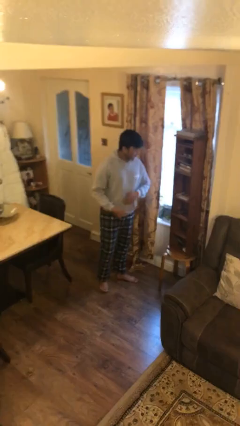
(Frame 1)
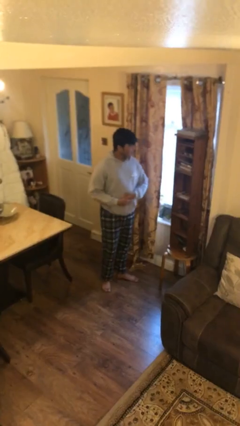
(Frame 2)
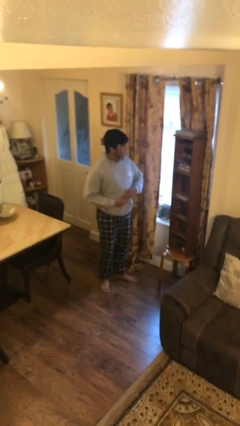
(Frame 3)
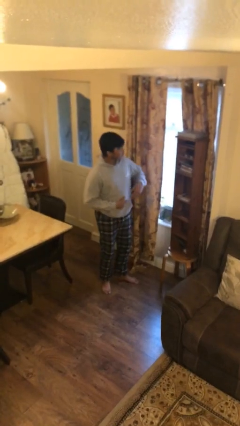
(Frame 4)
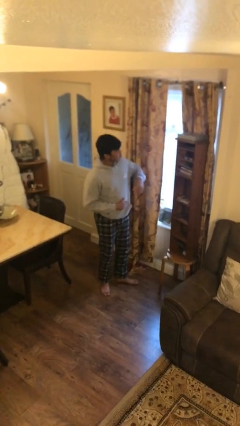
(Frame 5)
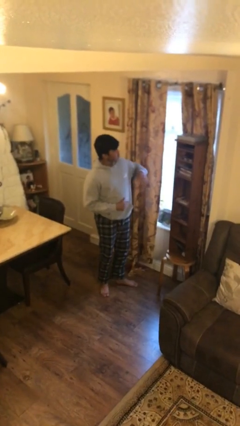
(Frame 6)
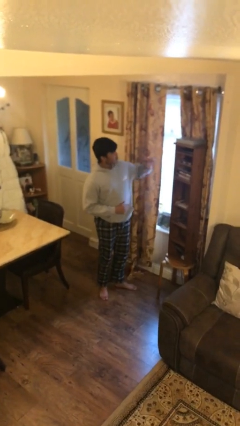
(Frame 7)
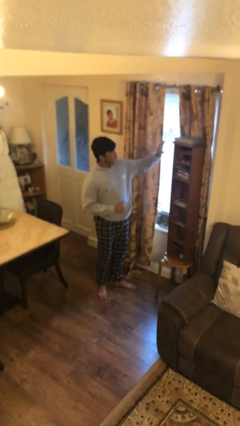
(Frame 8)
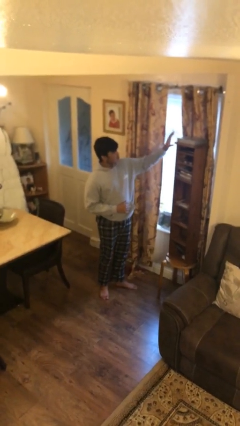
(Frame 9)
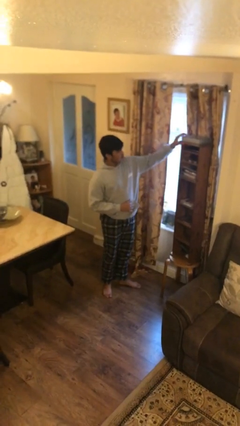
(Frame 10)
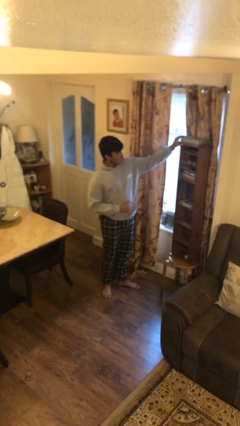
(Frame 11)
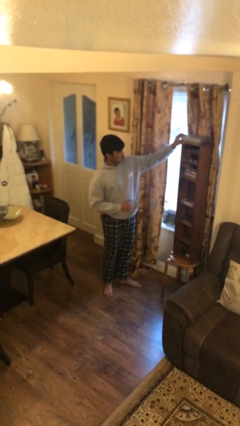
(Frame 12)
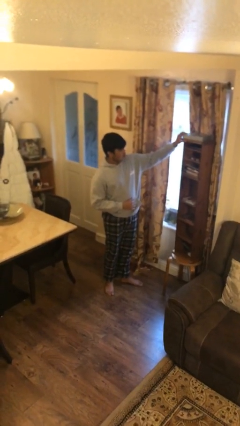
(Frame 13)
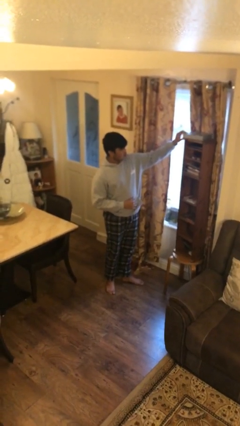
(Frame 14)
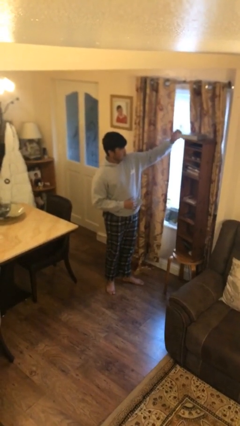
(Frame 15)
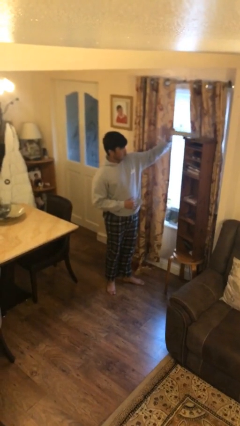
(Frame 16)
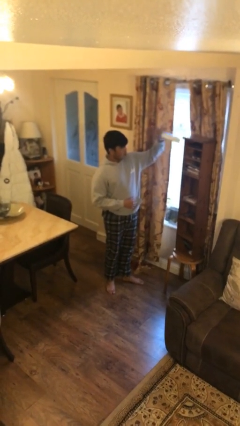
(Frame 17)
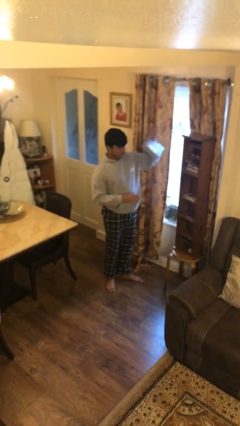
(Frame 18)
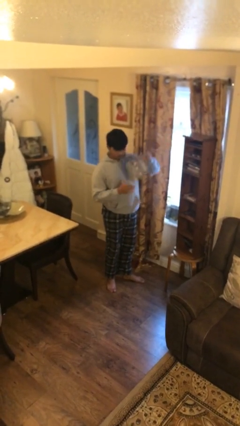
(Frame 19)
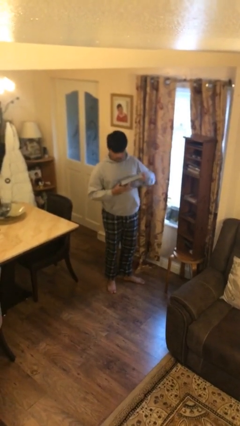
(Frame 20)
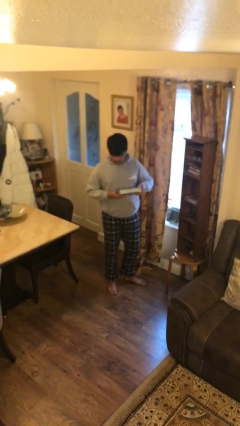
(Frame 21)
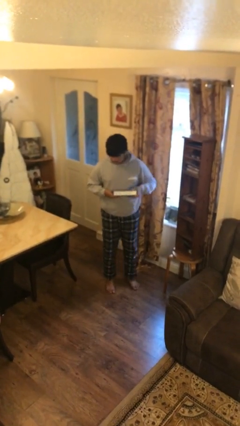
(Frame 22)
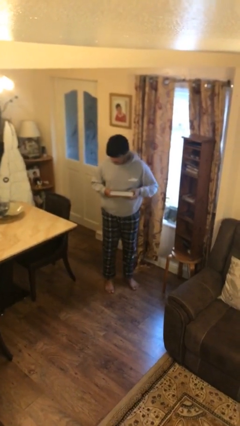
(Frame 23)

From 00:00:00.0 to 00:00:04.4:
person picks up object from shelf

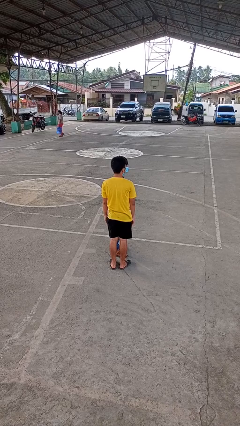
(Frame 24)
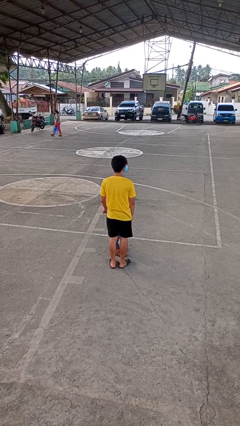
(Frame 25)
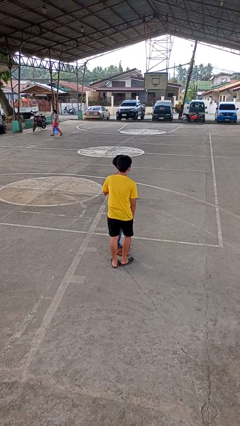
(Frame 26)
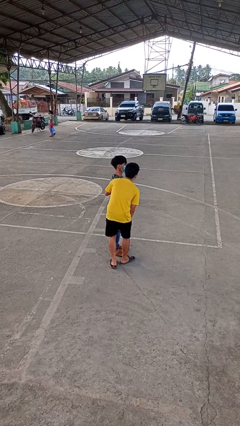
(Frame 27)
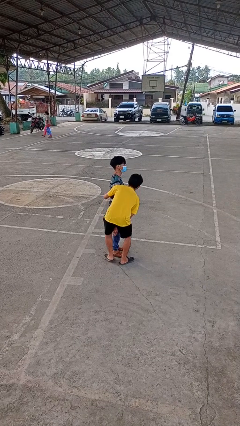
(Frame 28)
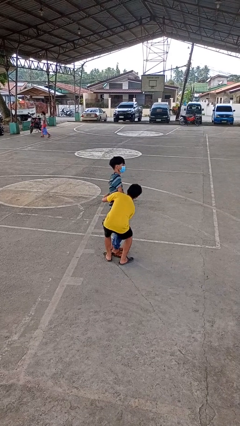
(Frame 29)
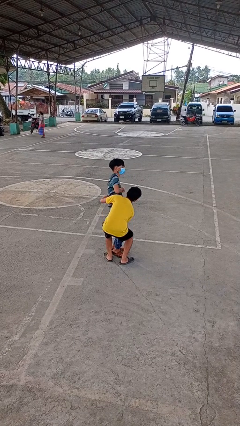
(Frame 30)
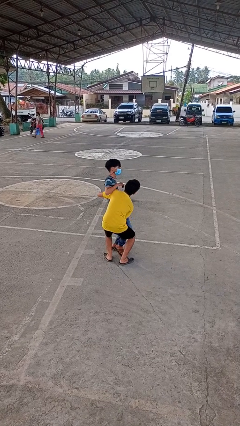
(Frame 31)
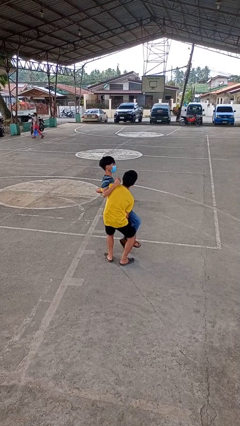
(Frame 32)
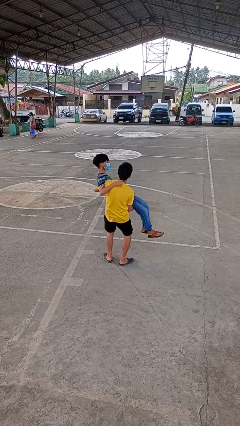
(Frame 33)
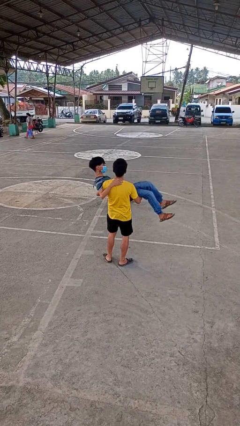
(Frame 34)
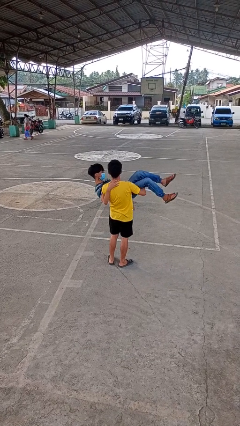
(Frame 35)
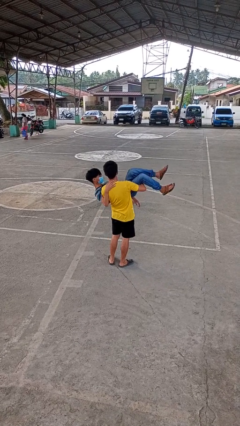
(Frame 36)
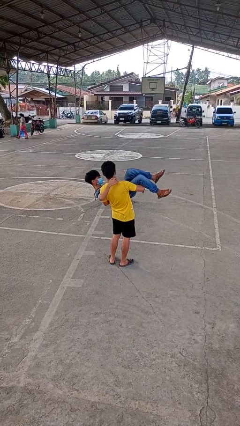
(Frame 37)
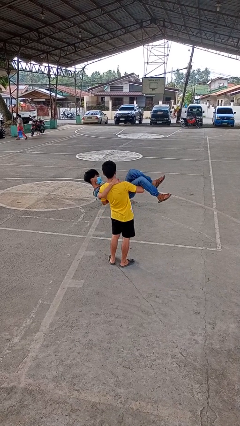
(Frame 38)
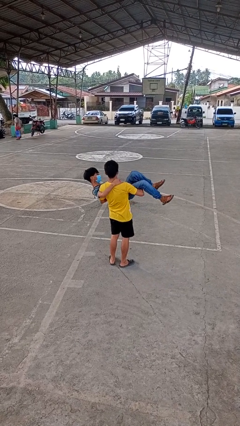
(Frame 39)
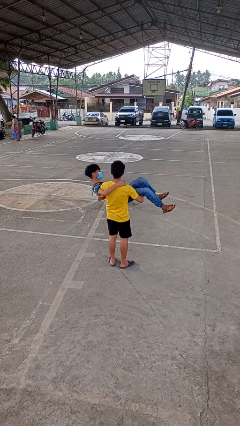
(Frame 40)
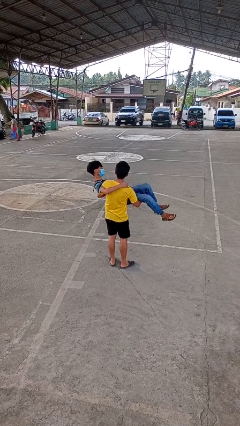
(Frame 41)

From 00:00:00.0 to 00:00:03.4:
person picks up person

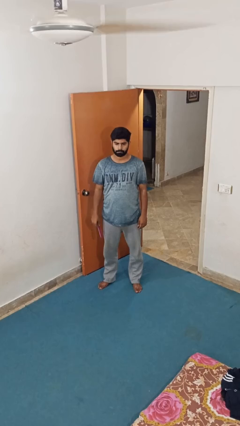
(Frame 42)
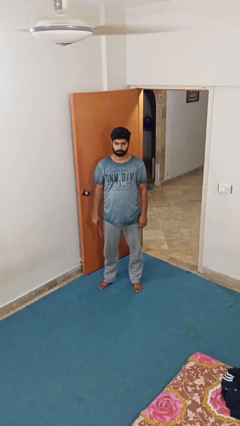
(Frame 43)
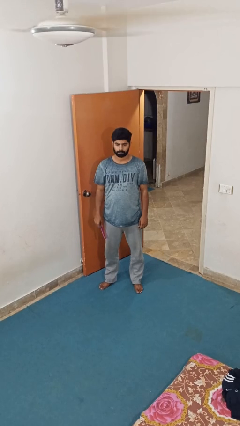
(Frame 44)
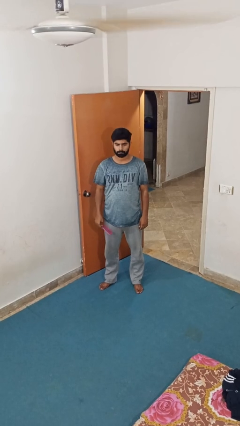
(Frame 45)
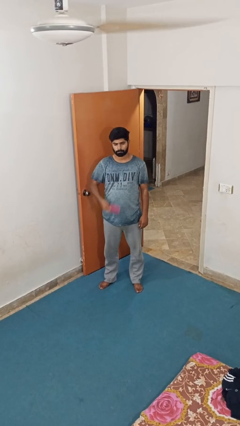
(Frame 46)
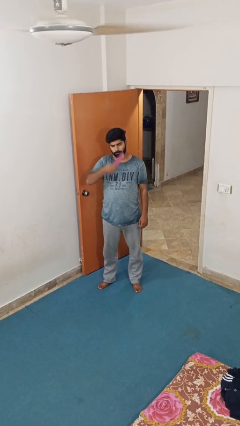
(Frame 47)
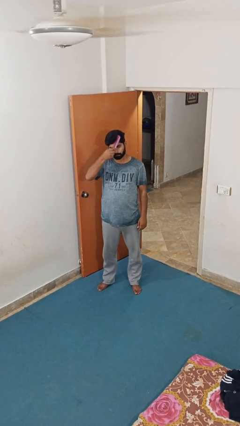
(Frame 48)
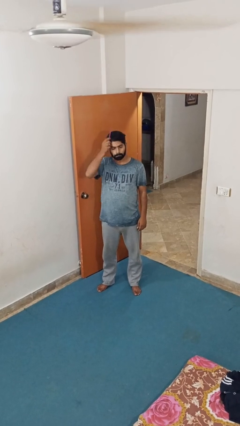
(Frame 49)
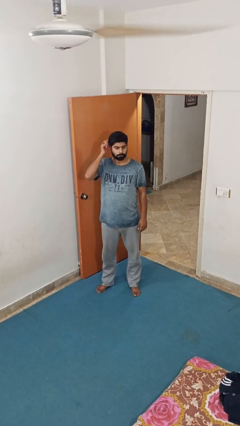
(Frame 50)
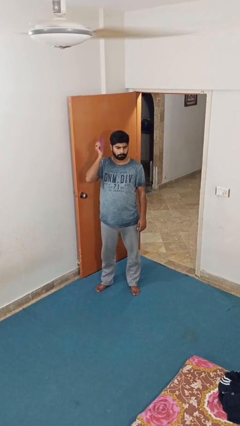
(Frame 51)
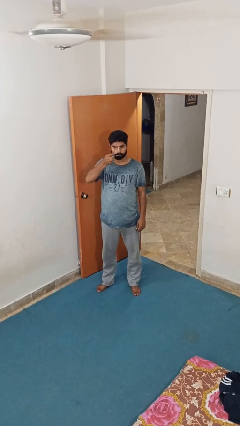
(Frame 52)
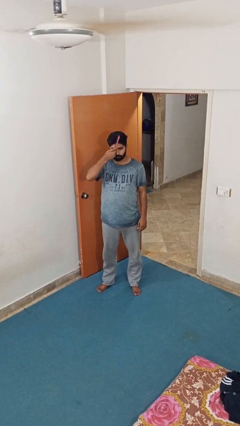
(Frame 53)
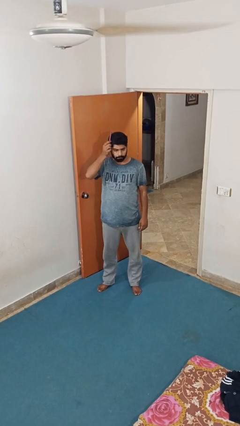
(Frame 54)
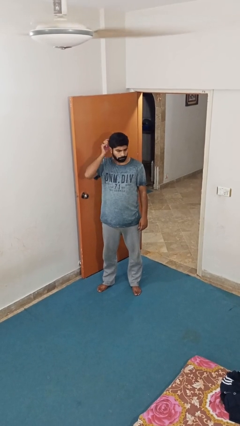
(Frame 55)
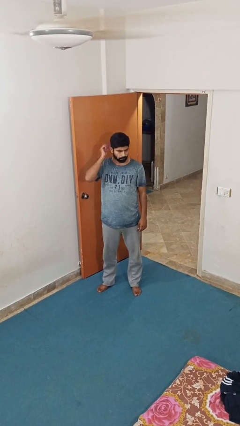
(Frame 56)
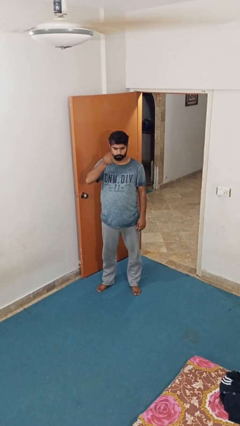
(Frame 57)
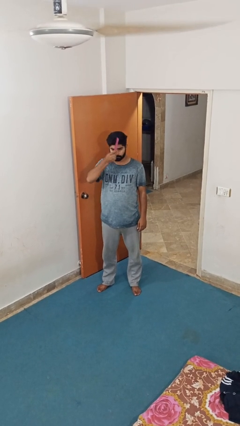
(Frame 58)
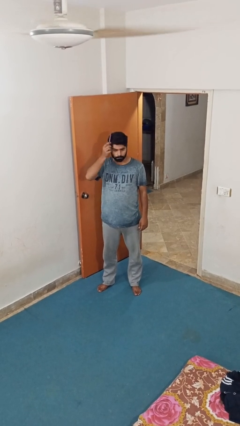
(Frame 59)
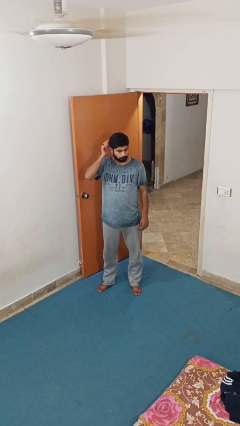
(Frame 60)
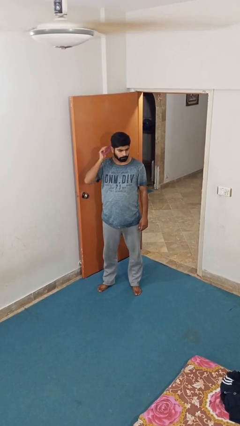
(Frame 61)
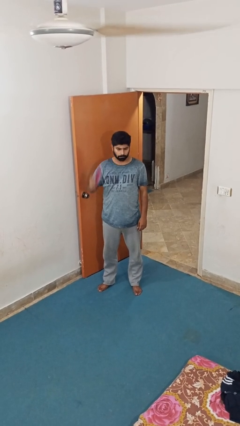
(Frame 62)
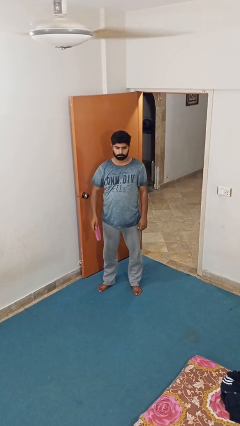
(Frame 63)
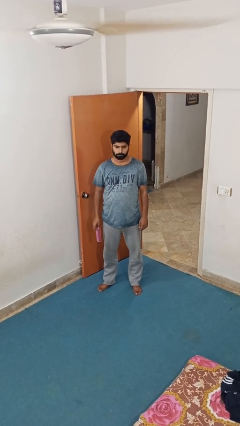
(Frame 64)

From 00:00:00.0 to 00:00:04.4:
person brushes hair

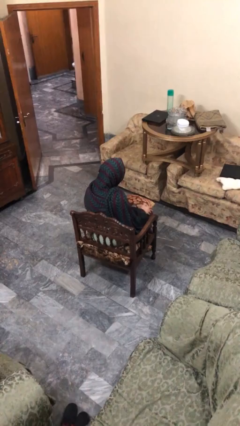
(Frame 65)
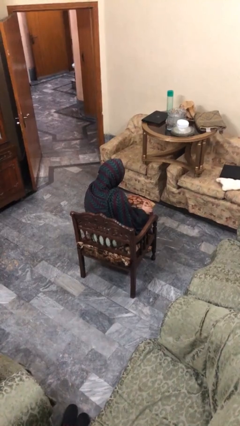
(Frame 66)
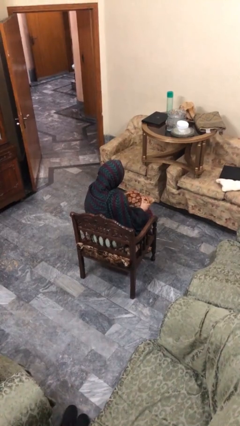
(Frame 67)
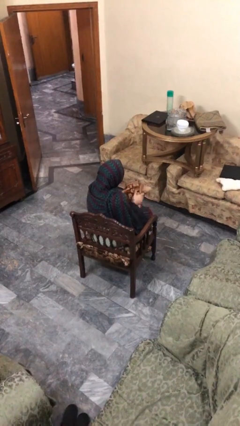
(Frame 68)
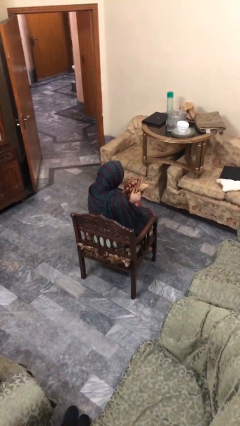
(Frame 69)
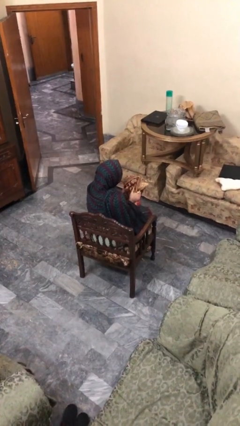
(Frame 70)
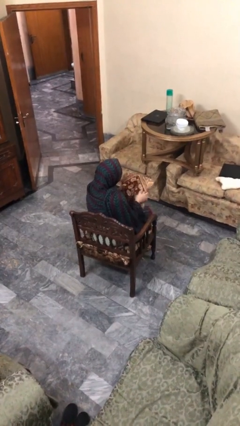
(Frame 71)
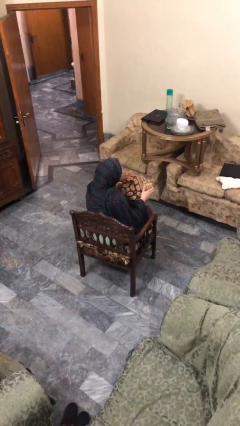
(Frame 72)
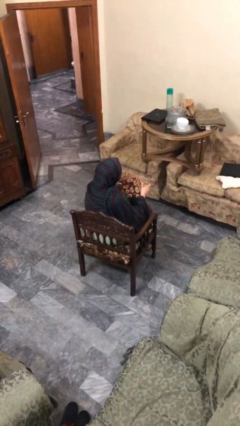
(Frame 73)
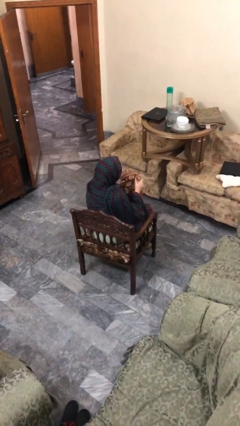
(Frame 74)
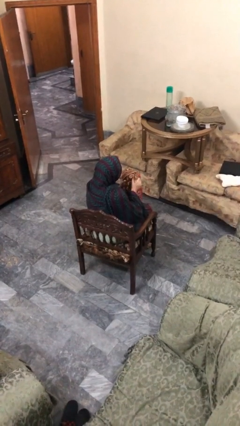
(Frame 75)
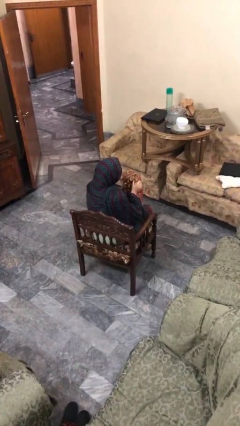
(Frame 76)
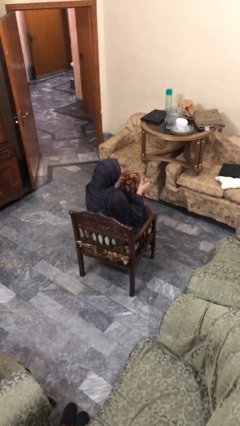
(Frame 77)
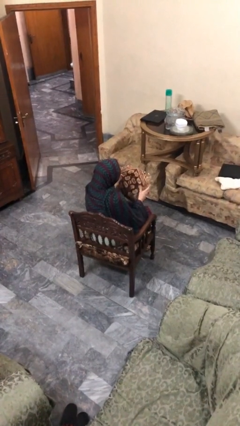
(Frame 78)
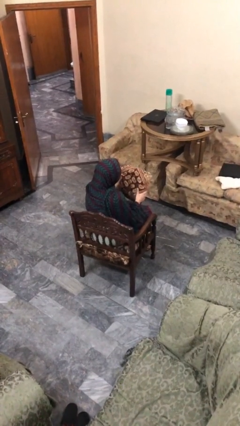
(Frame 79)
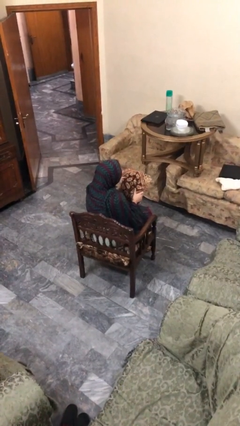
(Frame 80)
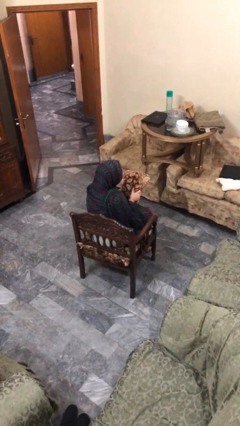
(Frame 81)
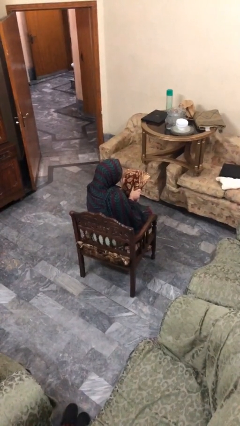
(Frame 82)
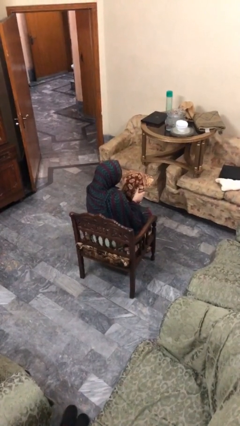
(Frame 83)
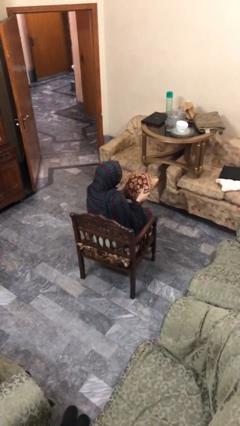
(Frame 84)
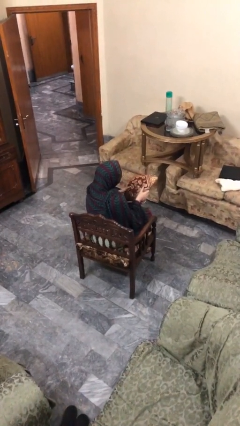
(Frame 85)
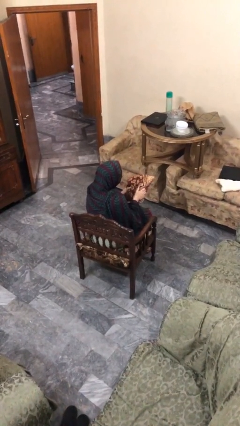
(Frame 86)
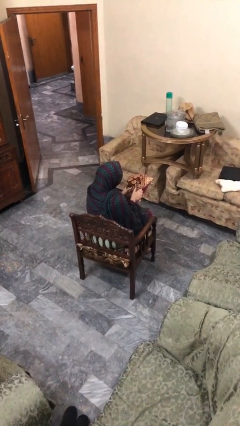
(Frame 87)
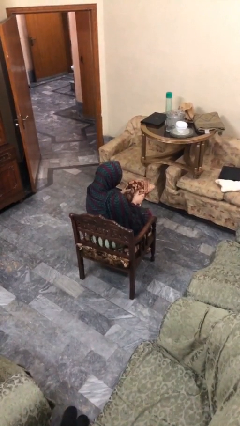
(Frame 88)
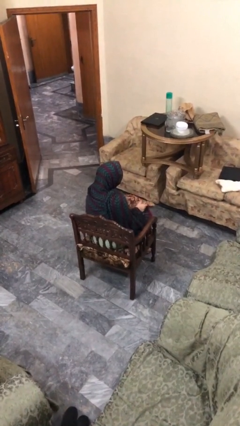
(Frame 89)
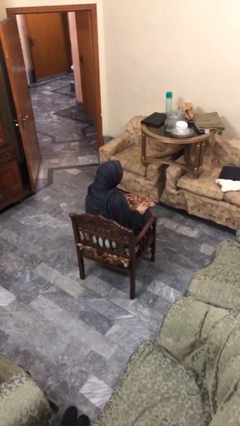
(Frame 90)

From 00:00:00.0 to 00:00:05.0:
person squeezes object

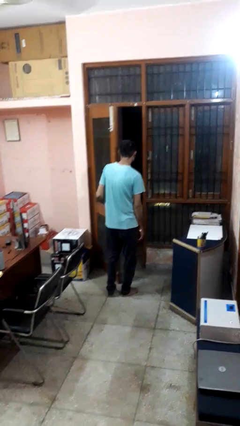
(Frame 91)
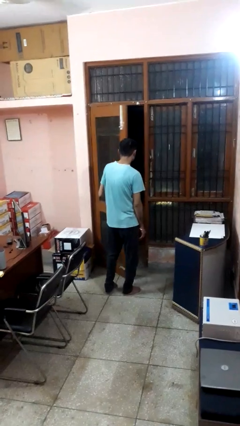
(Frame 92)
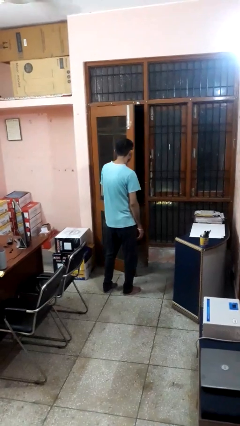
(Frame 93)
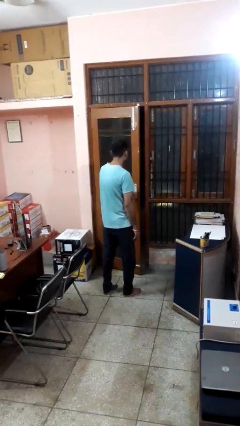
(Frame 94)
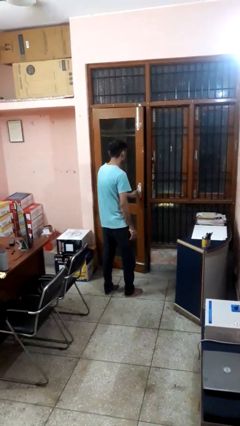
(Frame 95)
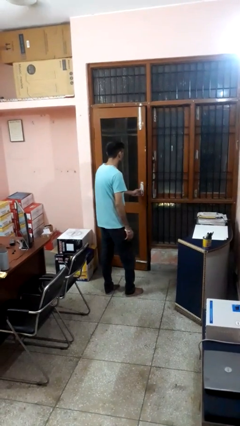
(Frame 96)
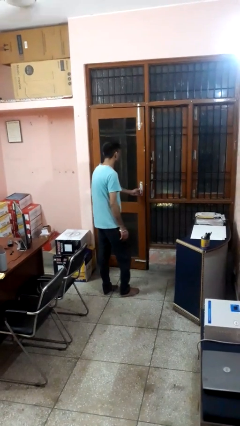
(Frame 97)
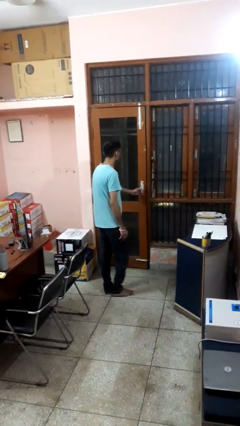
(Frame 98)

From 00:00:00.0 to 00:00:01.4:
person closes facility door
